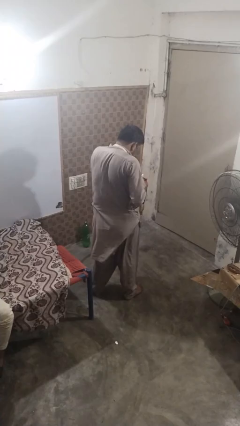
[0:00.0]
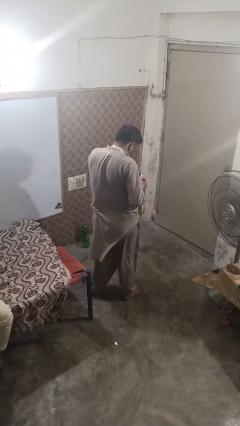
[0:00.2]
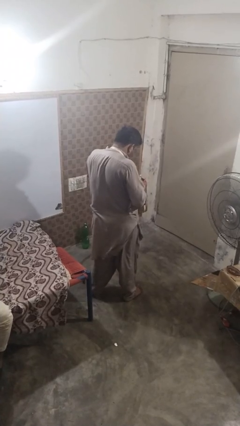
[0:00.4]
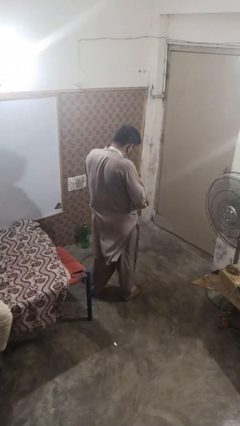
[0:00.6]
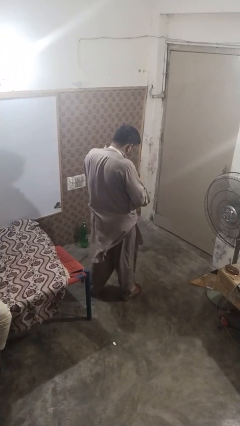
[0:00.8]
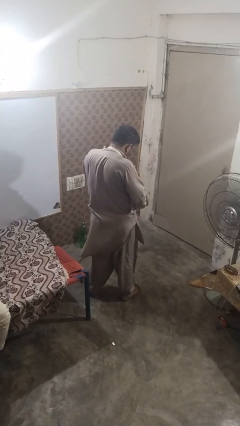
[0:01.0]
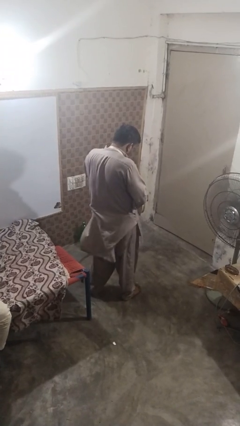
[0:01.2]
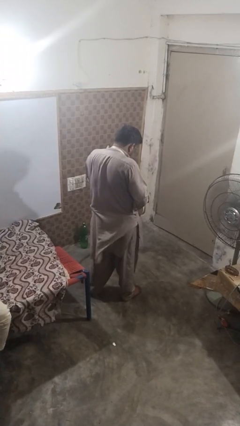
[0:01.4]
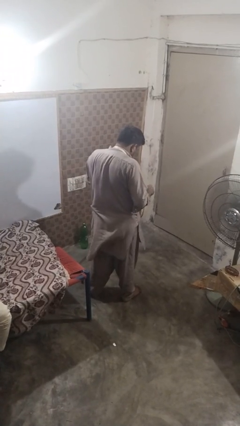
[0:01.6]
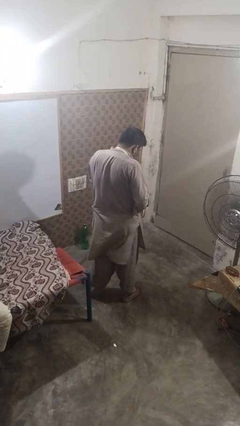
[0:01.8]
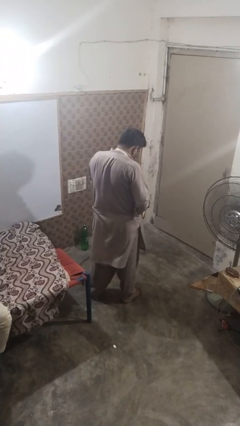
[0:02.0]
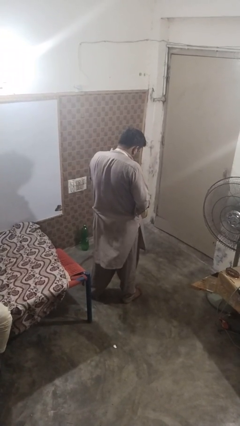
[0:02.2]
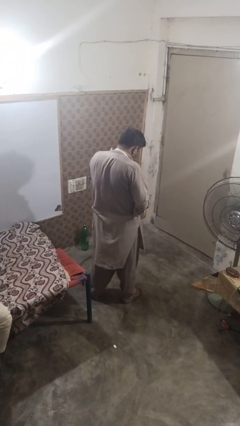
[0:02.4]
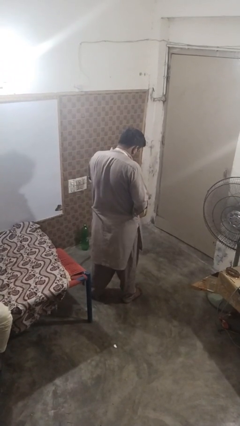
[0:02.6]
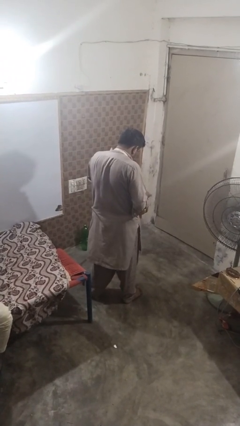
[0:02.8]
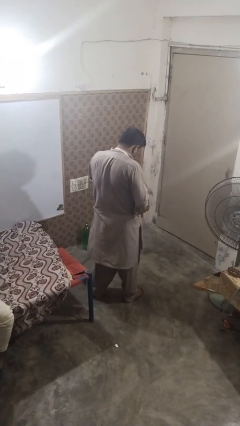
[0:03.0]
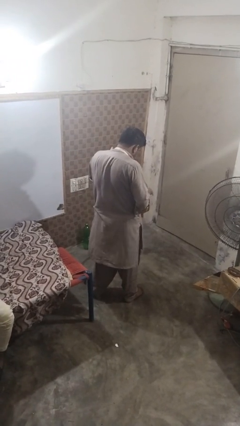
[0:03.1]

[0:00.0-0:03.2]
person puts object into purse

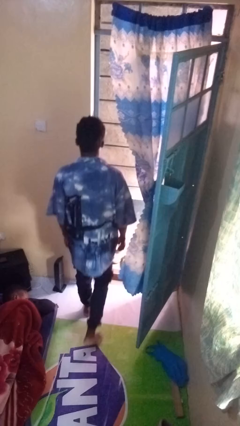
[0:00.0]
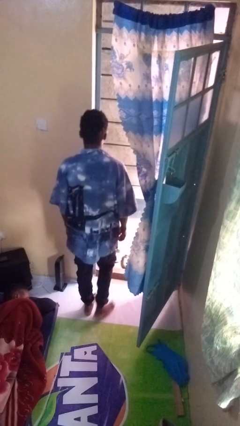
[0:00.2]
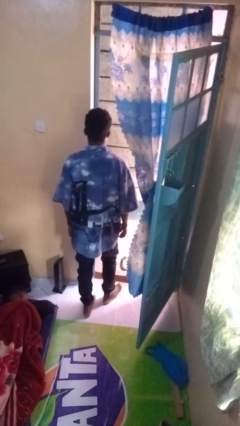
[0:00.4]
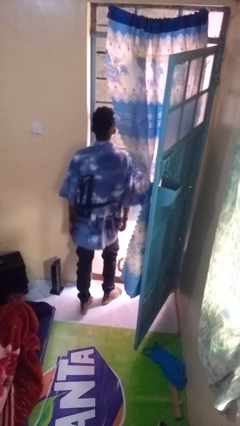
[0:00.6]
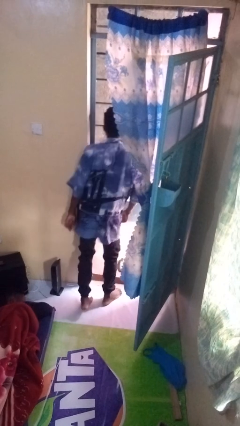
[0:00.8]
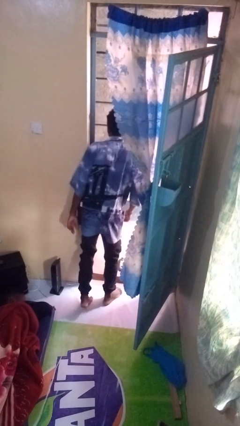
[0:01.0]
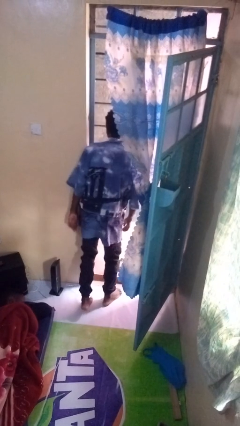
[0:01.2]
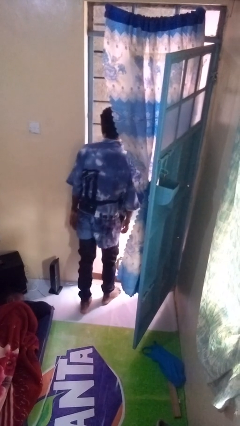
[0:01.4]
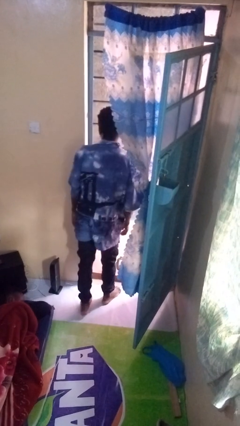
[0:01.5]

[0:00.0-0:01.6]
person bumps into wall

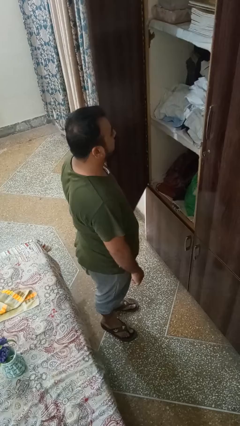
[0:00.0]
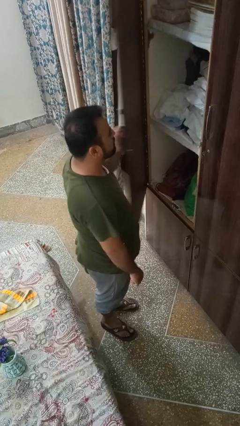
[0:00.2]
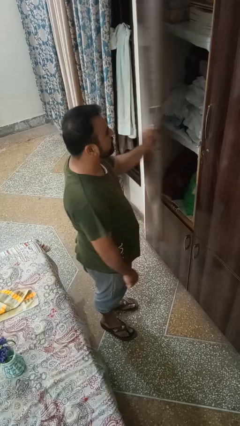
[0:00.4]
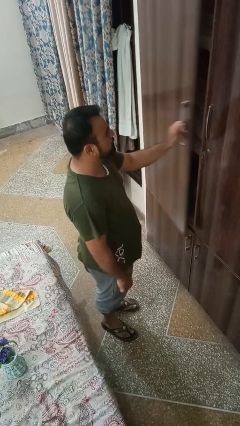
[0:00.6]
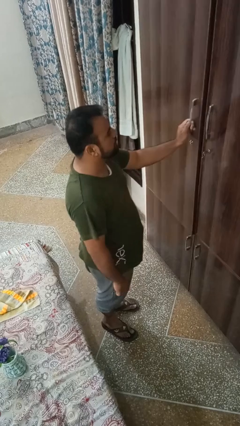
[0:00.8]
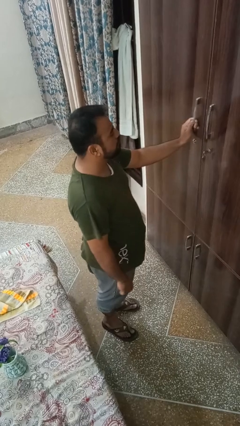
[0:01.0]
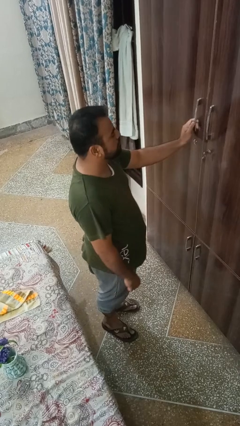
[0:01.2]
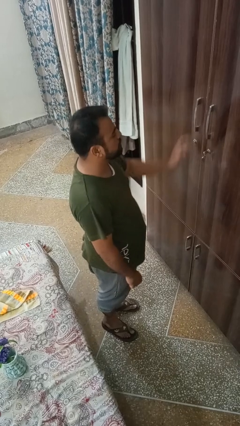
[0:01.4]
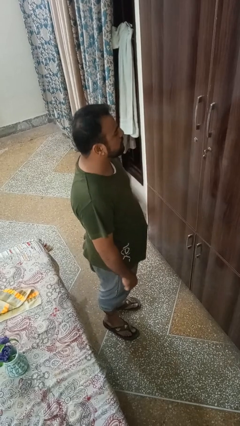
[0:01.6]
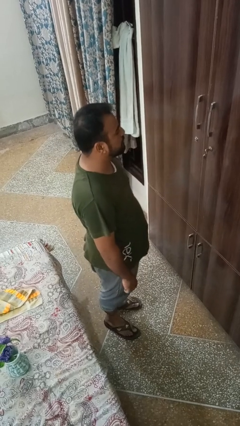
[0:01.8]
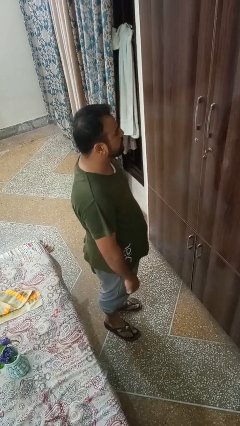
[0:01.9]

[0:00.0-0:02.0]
person closes closet door

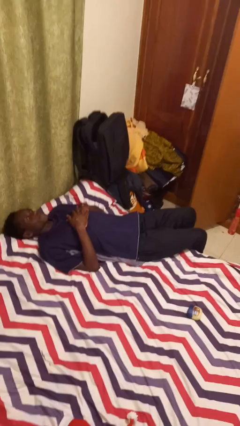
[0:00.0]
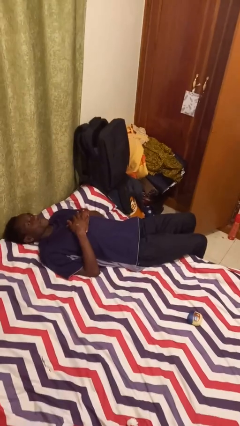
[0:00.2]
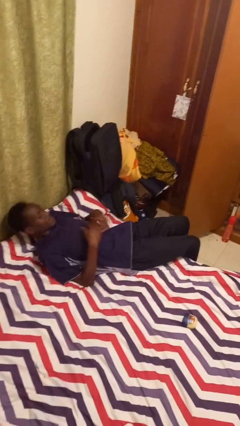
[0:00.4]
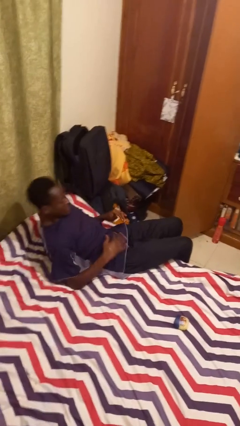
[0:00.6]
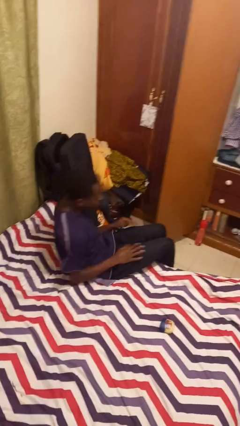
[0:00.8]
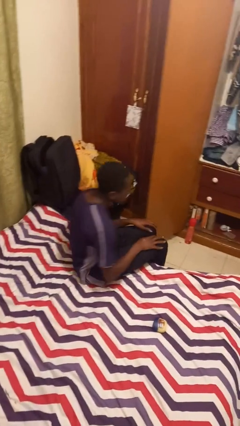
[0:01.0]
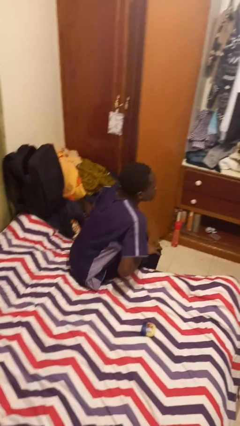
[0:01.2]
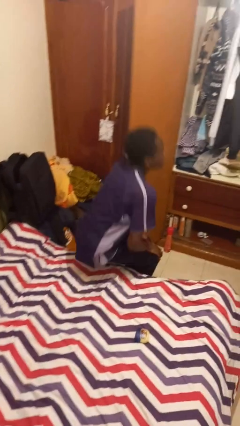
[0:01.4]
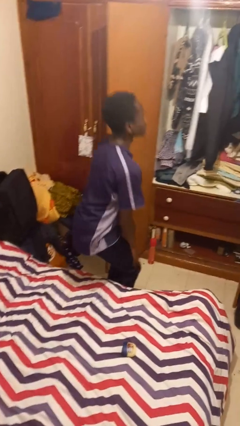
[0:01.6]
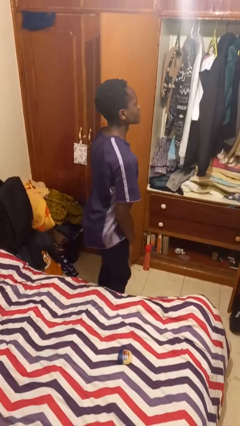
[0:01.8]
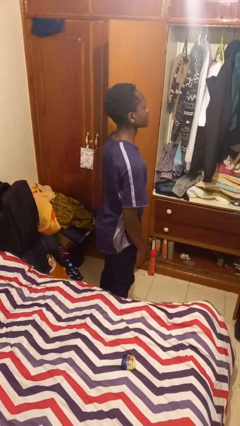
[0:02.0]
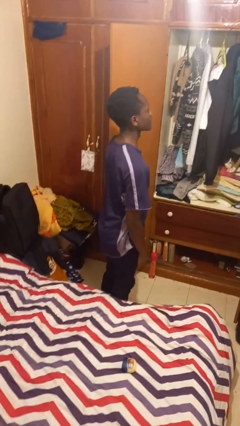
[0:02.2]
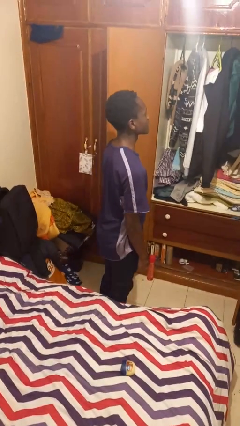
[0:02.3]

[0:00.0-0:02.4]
person stands up

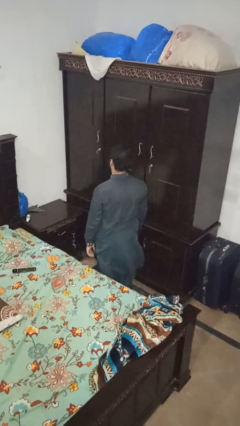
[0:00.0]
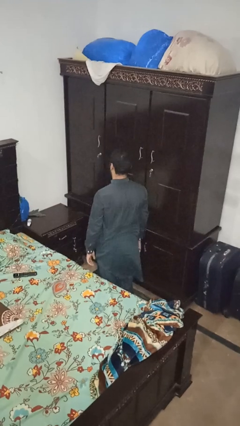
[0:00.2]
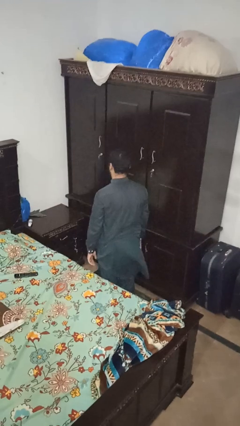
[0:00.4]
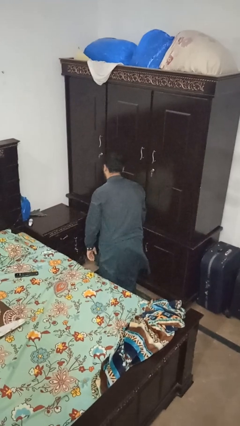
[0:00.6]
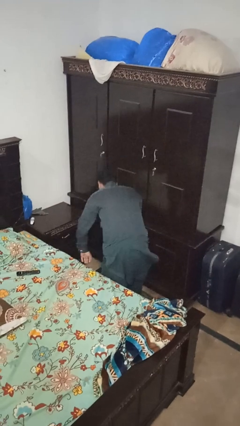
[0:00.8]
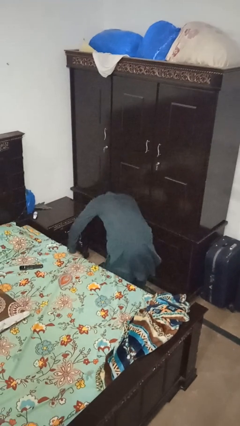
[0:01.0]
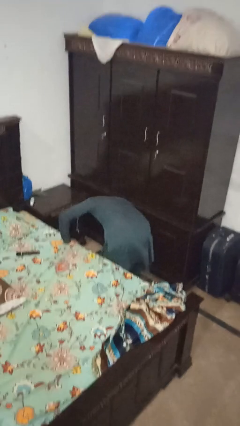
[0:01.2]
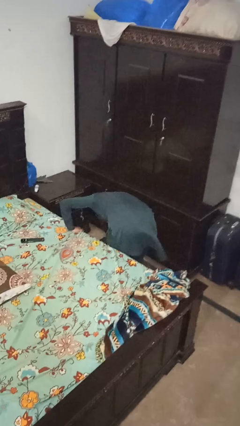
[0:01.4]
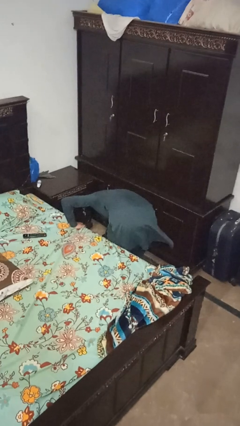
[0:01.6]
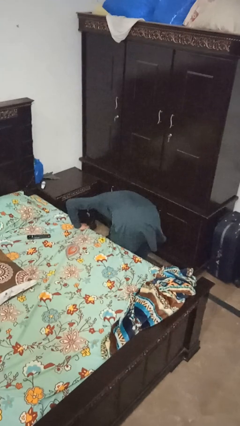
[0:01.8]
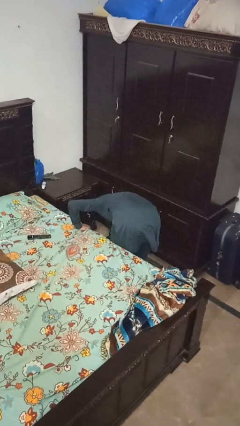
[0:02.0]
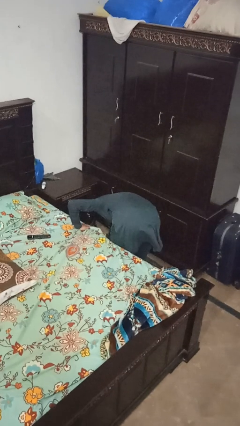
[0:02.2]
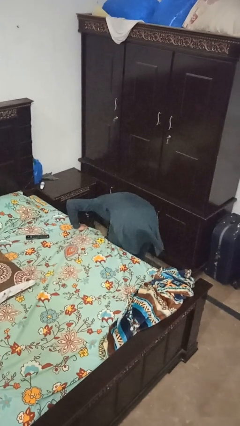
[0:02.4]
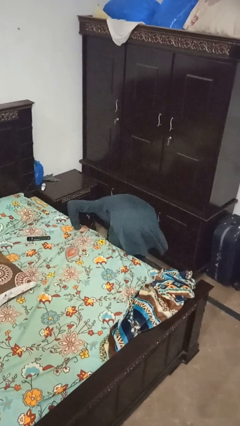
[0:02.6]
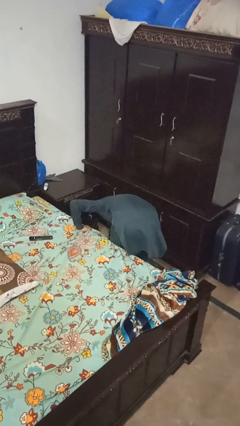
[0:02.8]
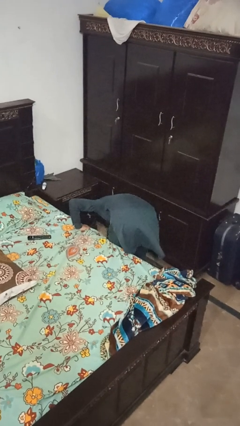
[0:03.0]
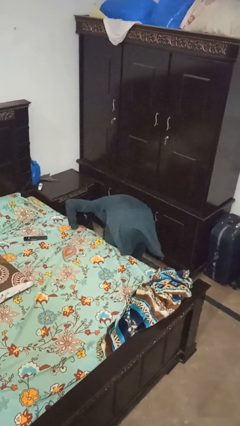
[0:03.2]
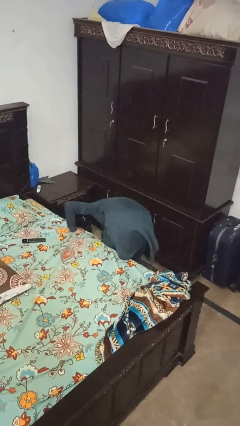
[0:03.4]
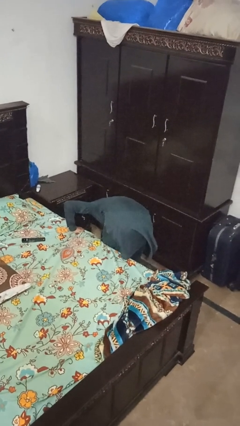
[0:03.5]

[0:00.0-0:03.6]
person searches under bed

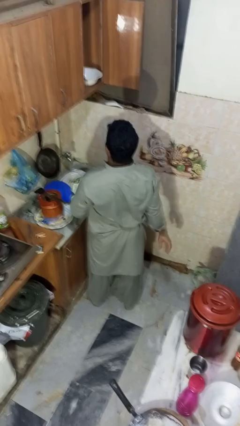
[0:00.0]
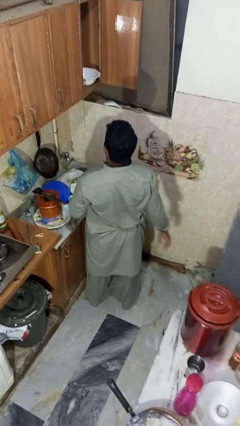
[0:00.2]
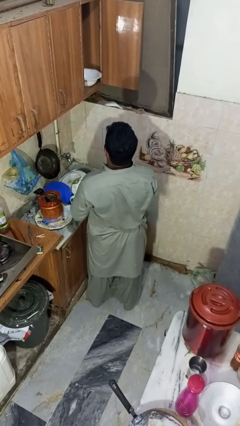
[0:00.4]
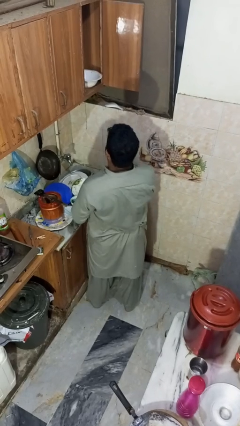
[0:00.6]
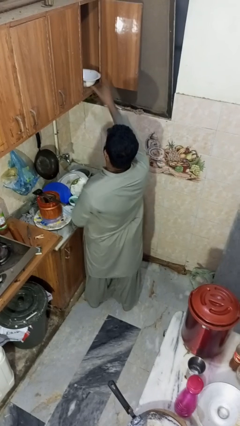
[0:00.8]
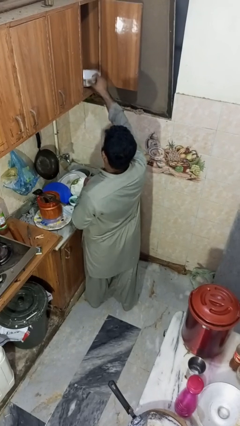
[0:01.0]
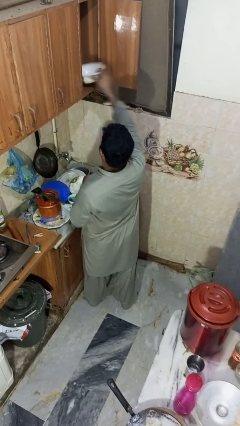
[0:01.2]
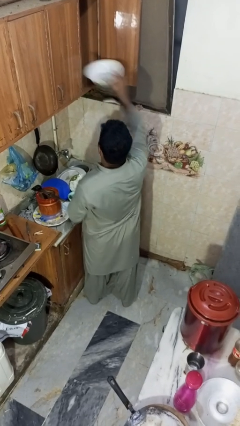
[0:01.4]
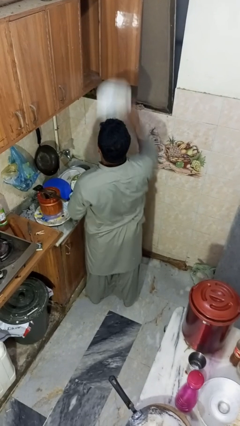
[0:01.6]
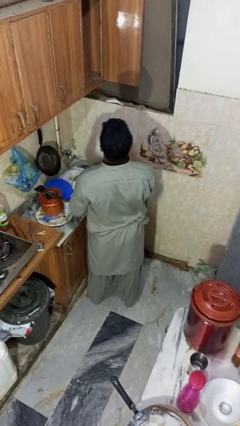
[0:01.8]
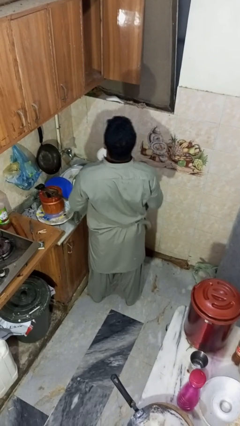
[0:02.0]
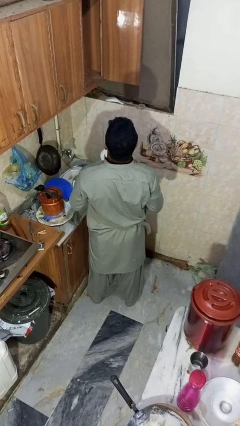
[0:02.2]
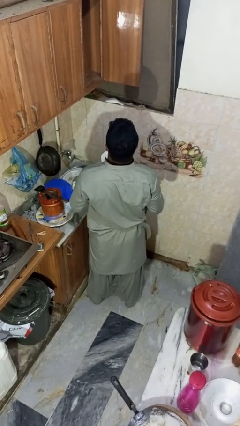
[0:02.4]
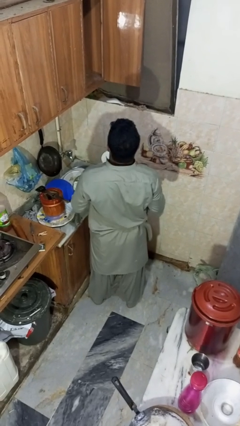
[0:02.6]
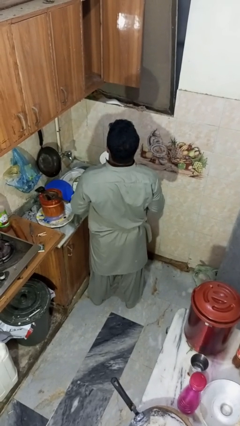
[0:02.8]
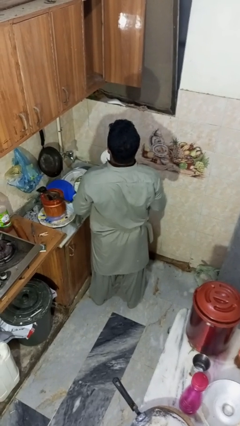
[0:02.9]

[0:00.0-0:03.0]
person takes object from cabinet

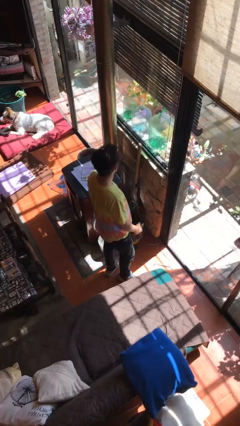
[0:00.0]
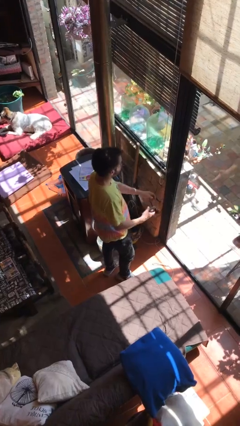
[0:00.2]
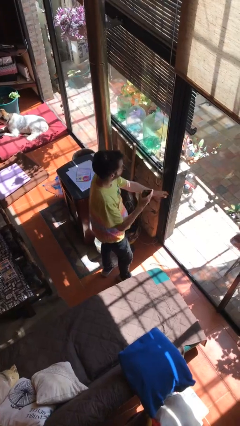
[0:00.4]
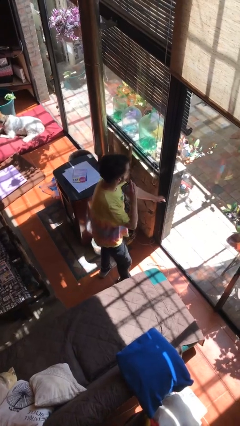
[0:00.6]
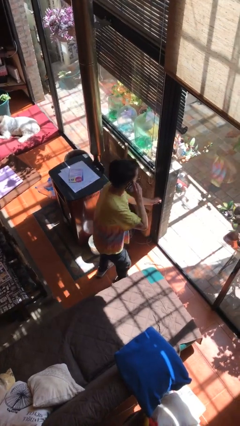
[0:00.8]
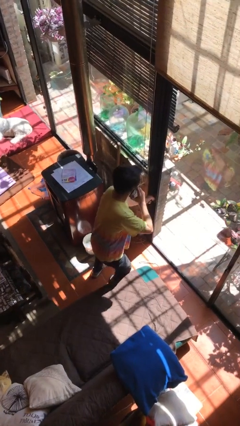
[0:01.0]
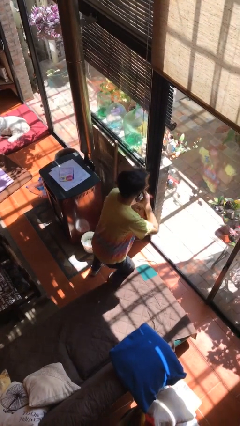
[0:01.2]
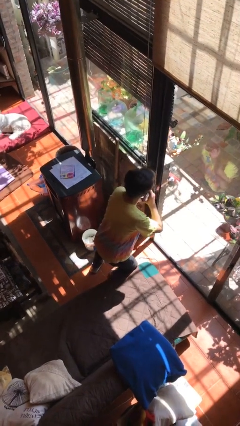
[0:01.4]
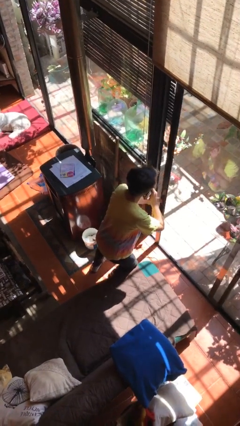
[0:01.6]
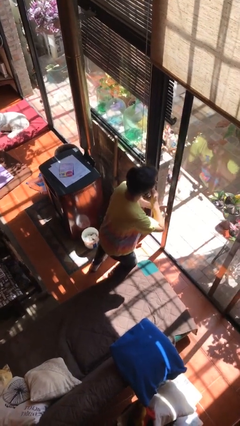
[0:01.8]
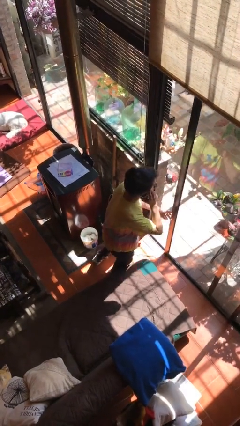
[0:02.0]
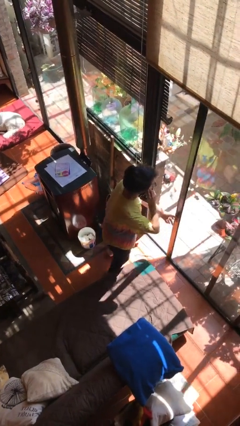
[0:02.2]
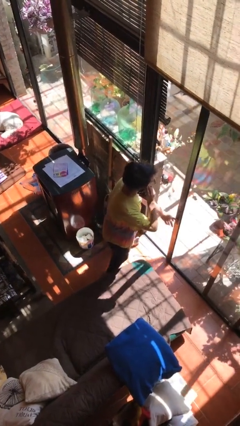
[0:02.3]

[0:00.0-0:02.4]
person opens facility door
